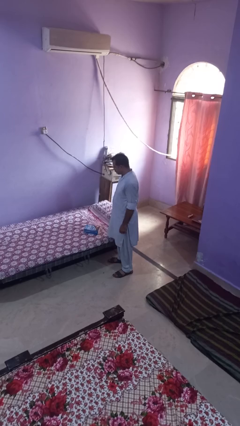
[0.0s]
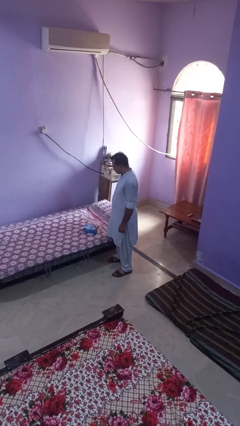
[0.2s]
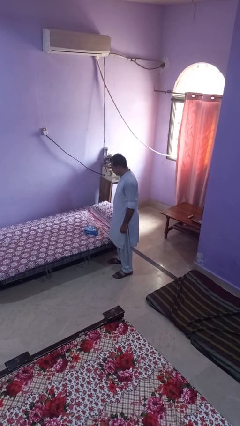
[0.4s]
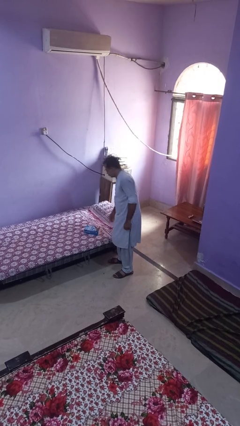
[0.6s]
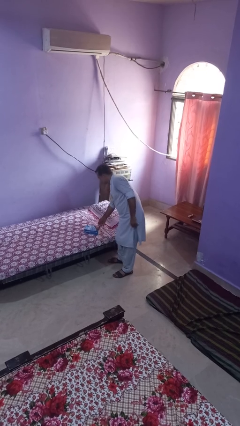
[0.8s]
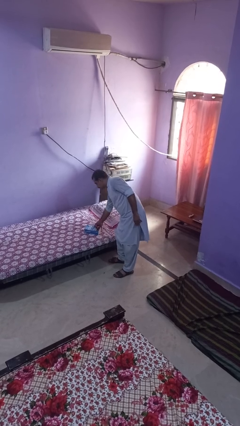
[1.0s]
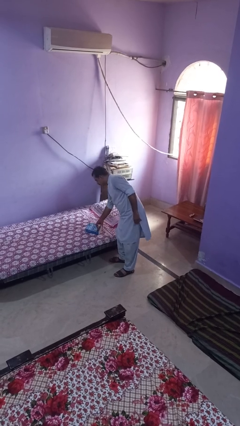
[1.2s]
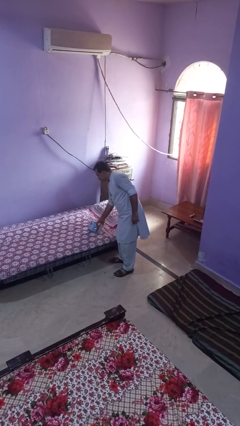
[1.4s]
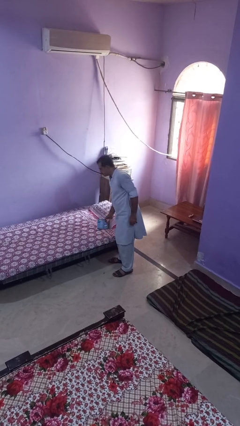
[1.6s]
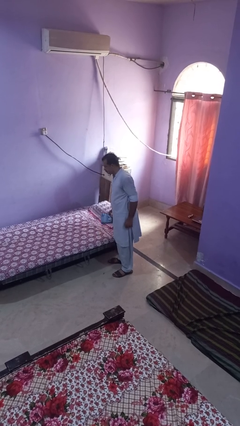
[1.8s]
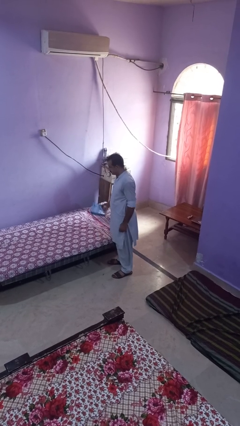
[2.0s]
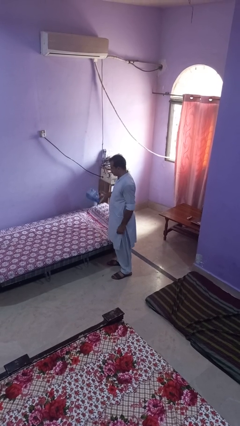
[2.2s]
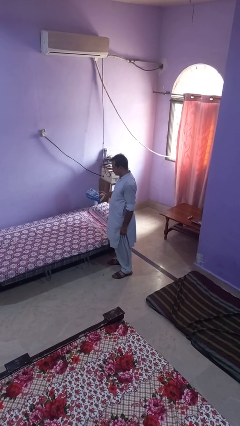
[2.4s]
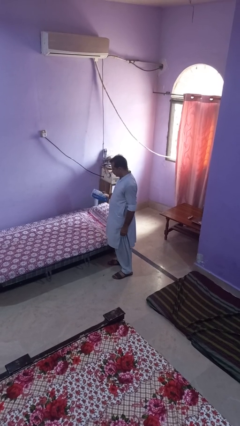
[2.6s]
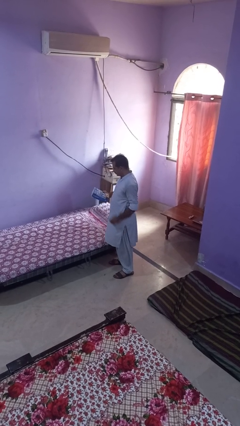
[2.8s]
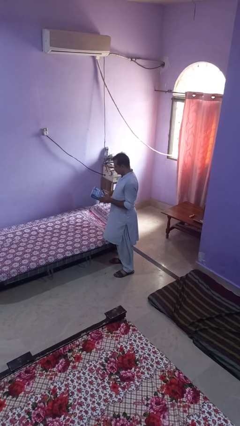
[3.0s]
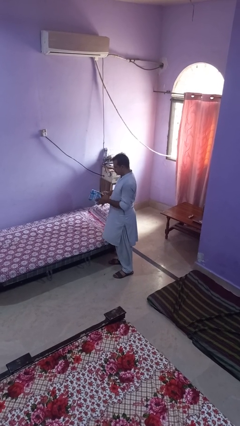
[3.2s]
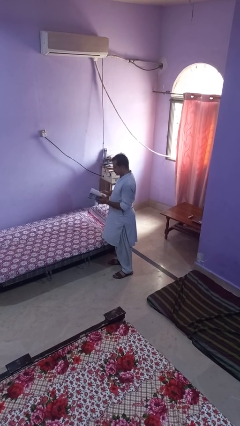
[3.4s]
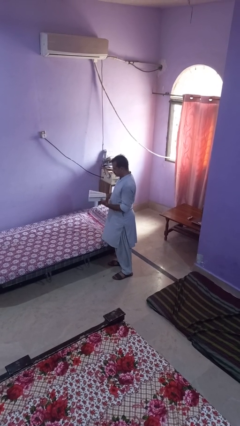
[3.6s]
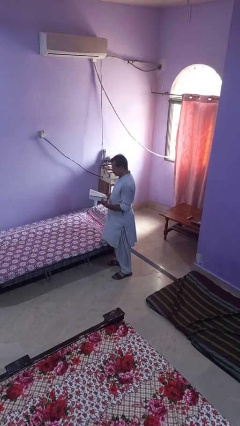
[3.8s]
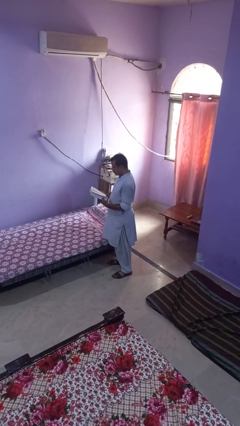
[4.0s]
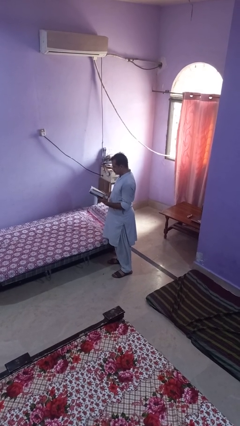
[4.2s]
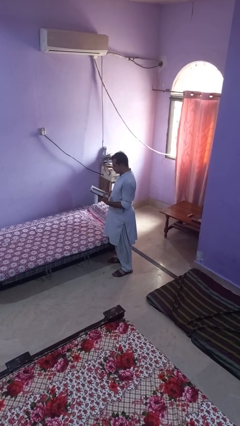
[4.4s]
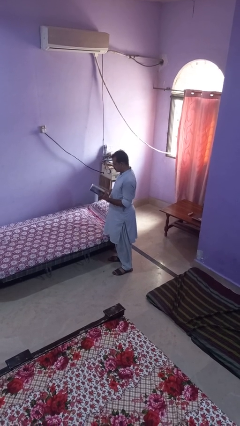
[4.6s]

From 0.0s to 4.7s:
person picks up object from bed

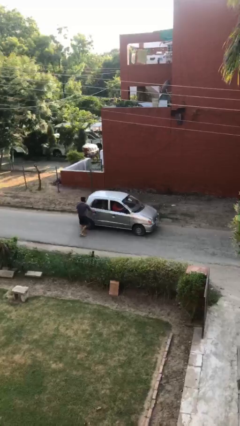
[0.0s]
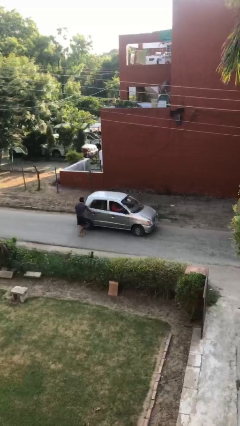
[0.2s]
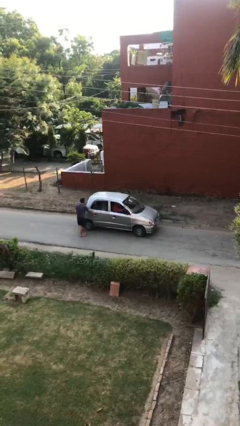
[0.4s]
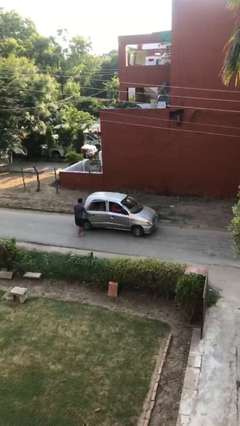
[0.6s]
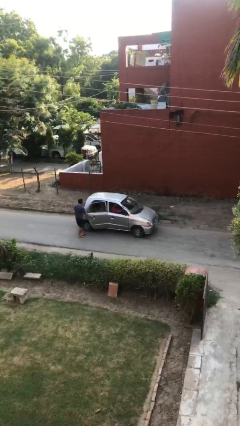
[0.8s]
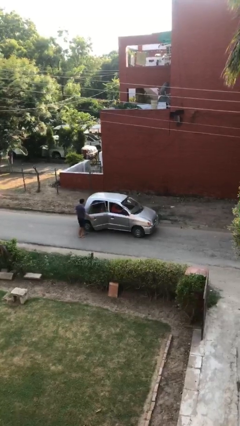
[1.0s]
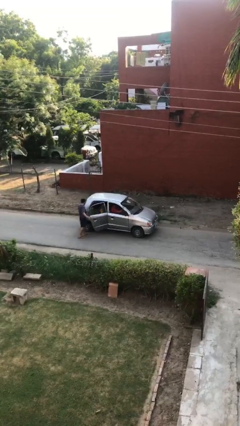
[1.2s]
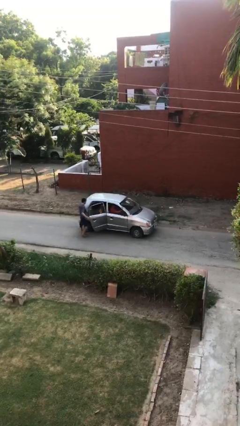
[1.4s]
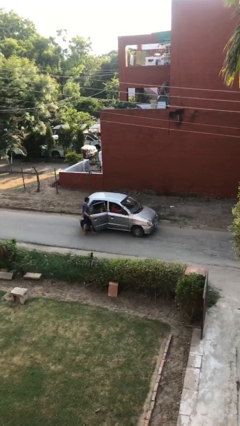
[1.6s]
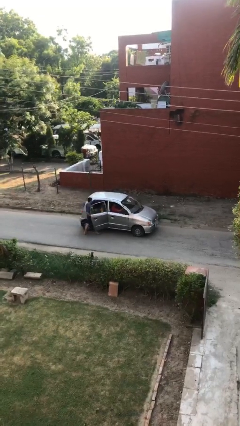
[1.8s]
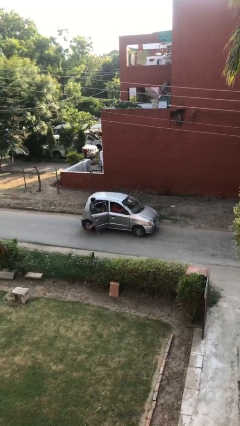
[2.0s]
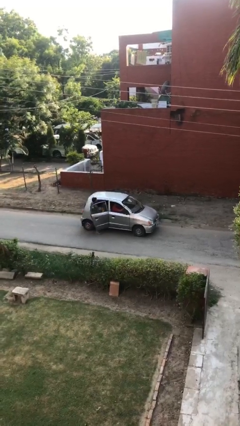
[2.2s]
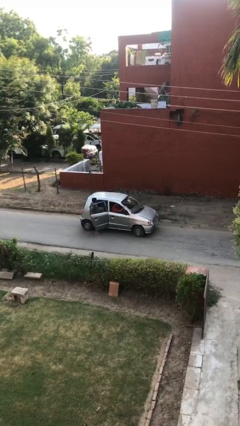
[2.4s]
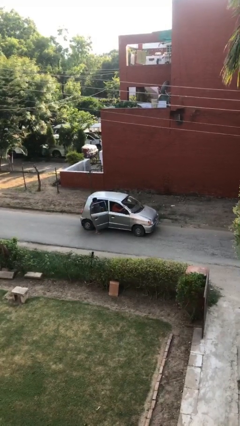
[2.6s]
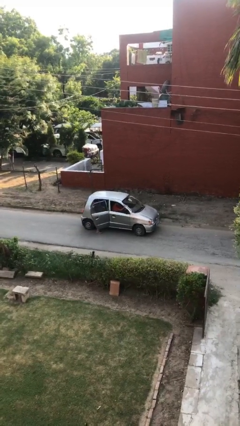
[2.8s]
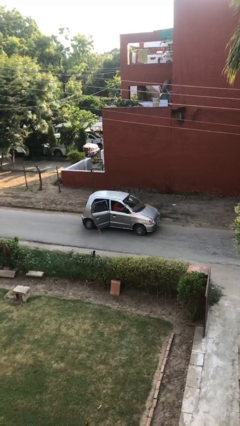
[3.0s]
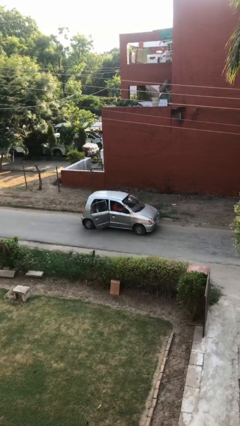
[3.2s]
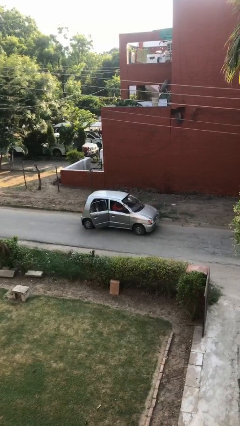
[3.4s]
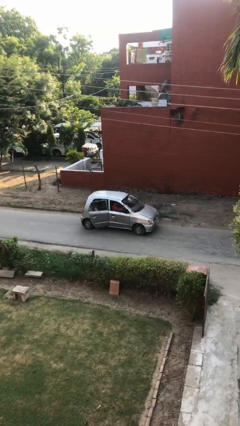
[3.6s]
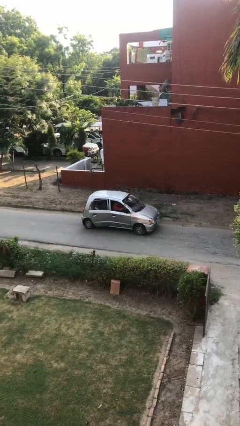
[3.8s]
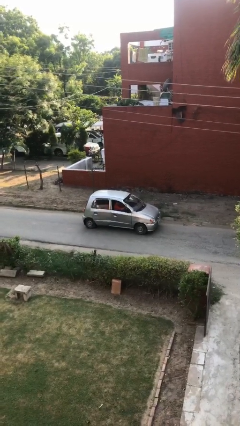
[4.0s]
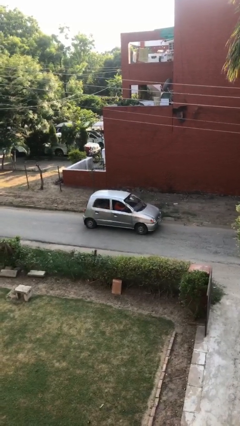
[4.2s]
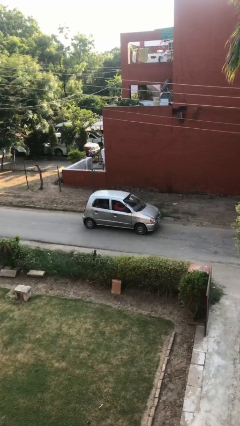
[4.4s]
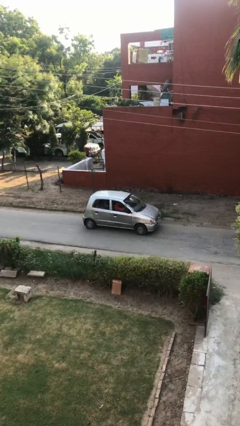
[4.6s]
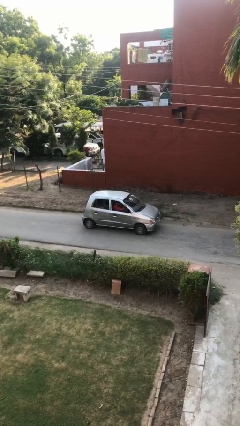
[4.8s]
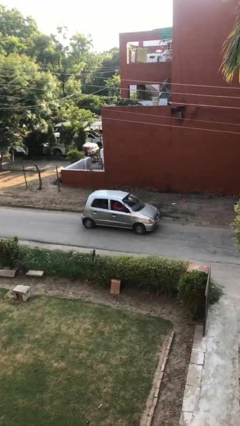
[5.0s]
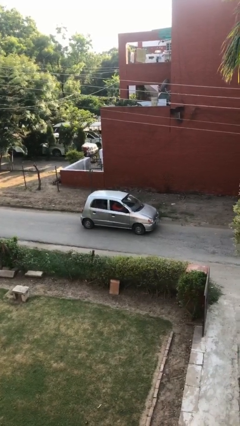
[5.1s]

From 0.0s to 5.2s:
car picks up person

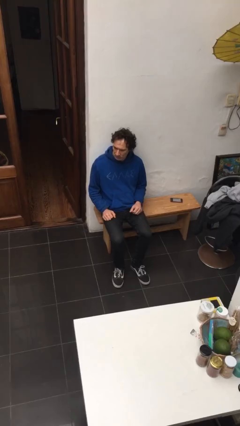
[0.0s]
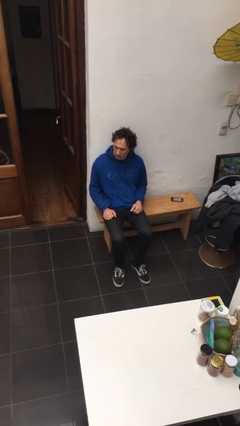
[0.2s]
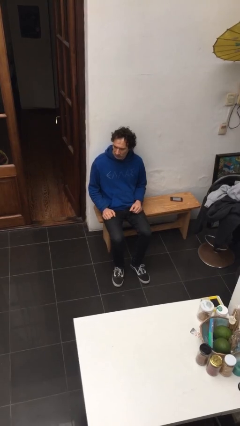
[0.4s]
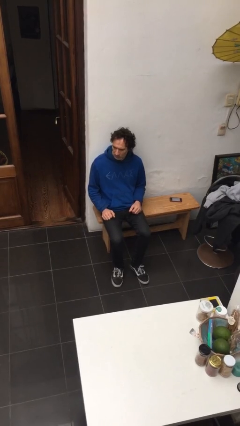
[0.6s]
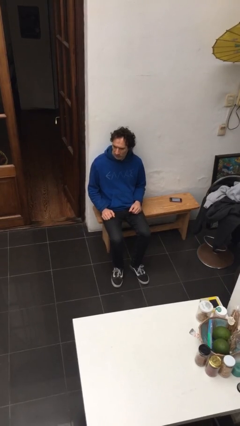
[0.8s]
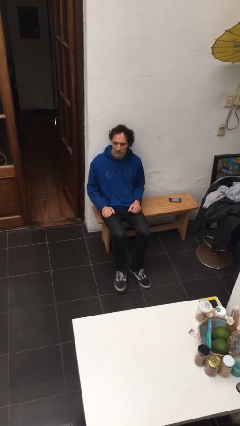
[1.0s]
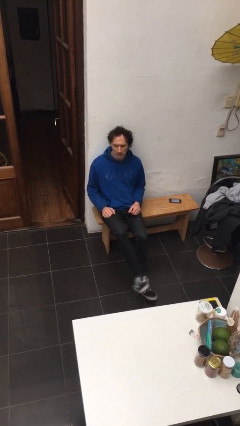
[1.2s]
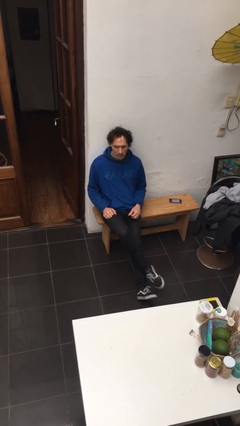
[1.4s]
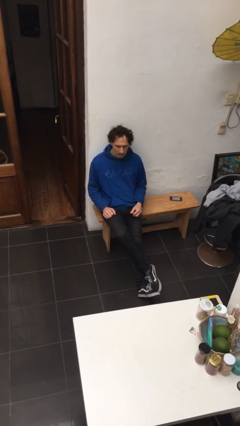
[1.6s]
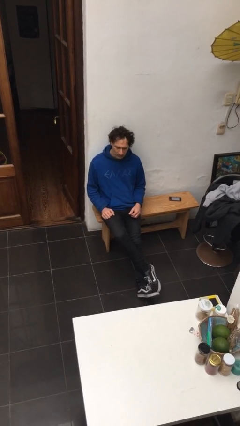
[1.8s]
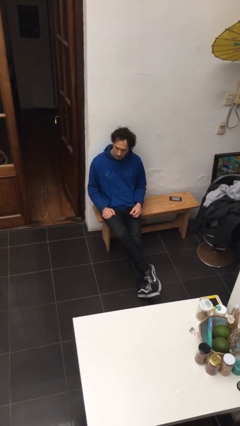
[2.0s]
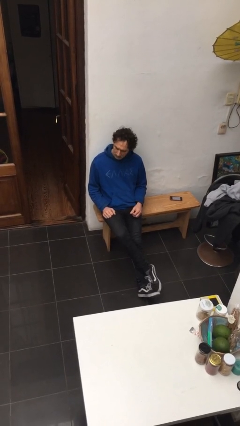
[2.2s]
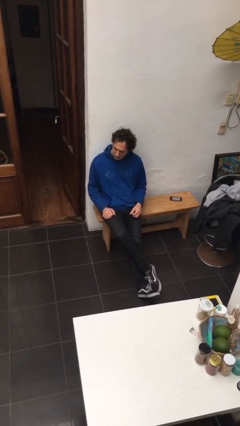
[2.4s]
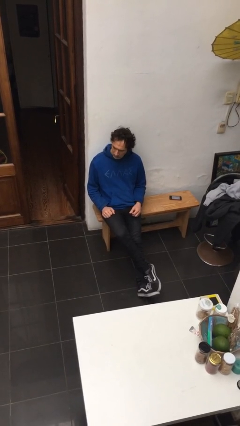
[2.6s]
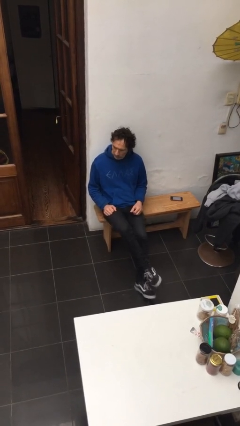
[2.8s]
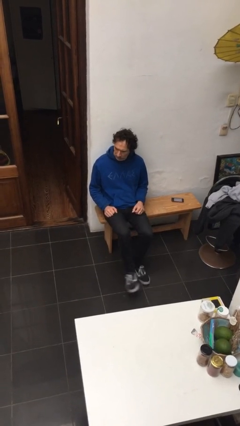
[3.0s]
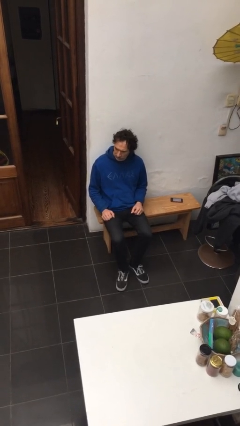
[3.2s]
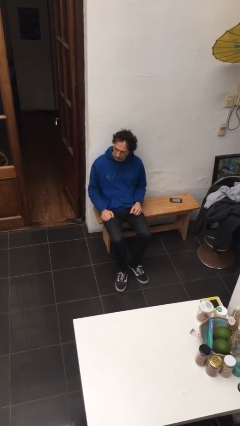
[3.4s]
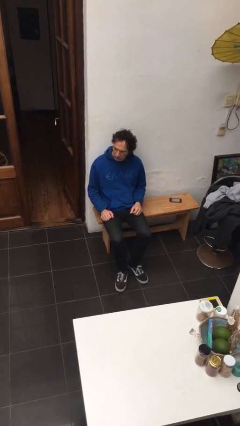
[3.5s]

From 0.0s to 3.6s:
person crosses legs

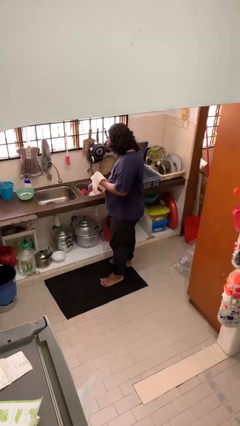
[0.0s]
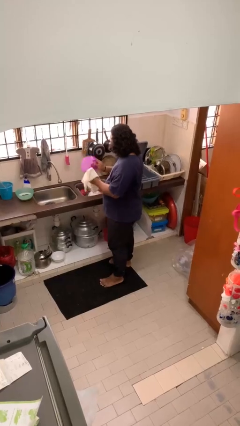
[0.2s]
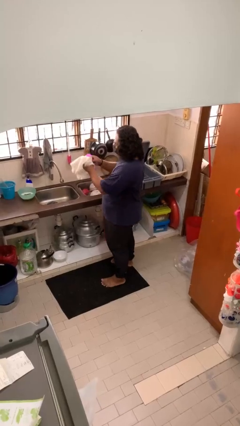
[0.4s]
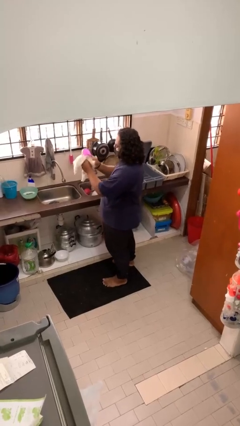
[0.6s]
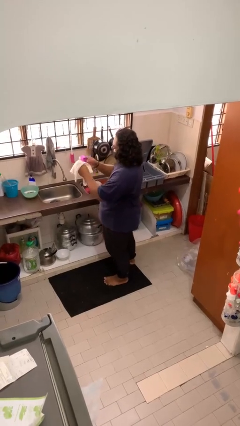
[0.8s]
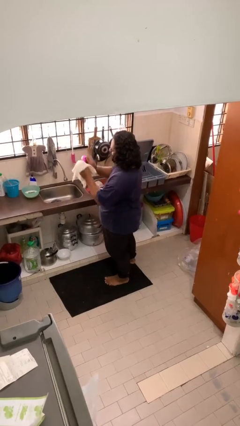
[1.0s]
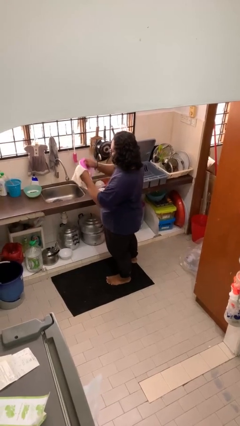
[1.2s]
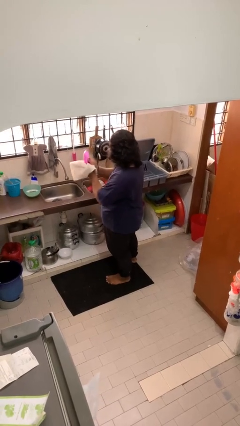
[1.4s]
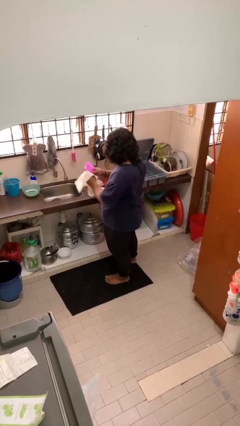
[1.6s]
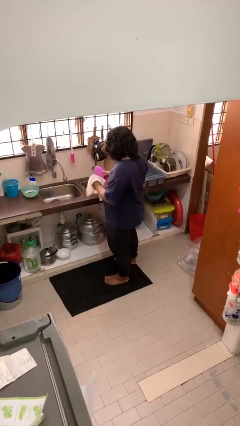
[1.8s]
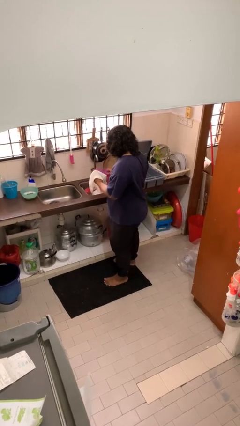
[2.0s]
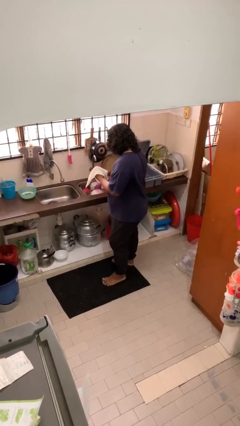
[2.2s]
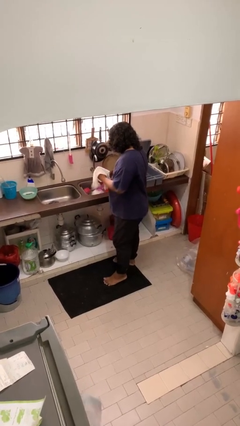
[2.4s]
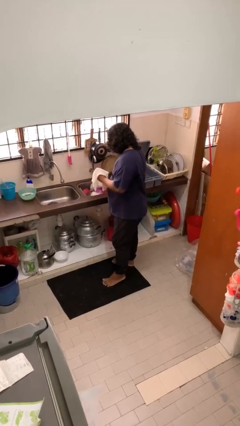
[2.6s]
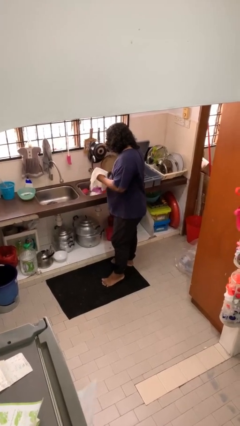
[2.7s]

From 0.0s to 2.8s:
person dries dish

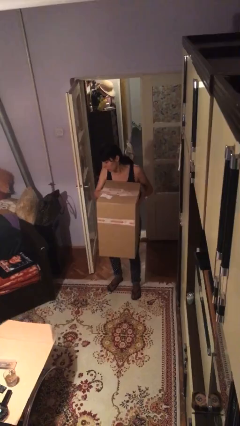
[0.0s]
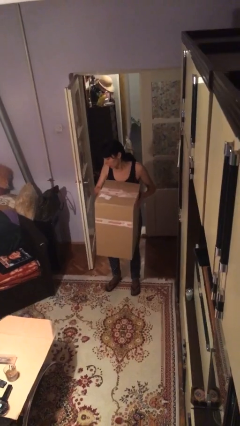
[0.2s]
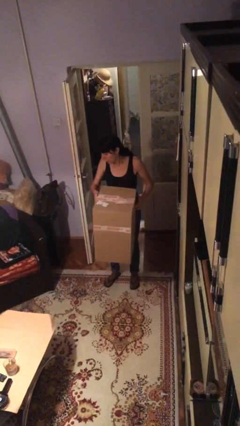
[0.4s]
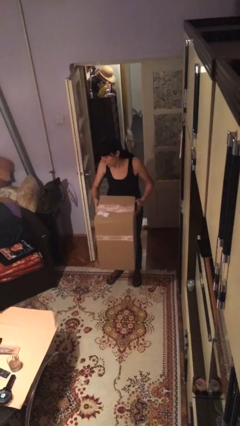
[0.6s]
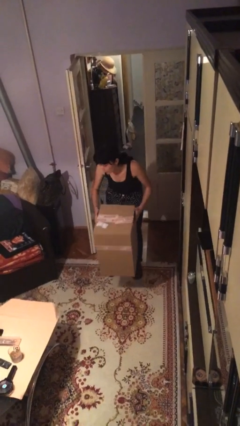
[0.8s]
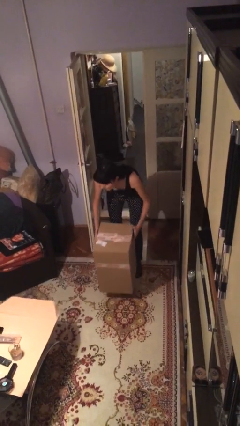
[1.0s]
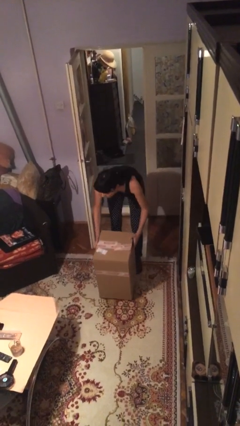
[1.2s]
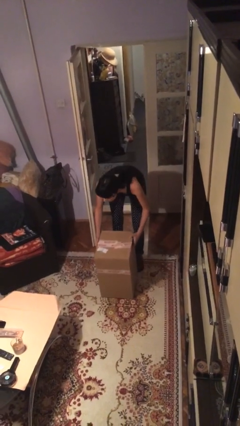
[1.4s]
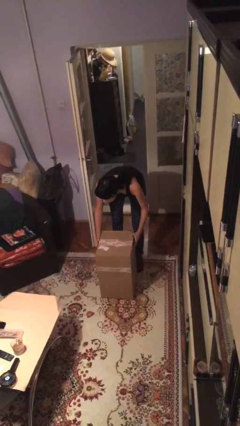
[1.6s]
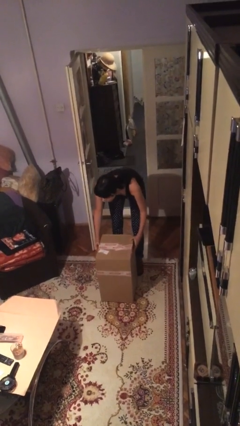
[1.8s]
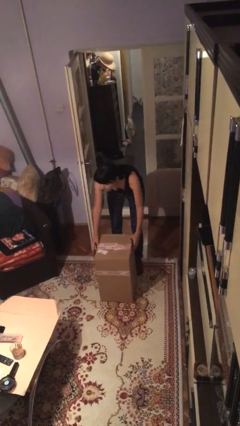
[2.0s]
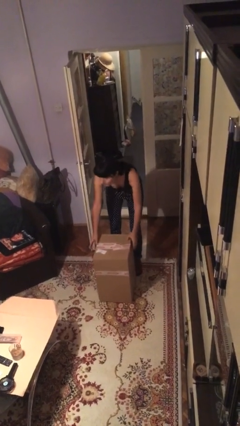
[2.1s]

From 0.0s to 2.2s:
person puts down object on floor
